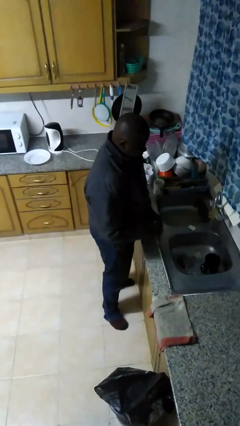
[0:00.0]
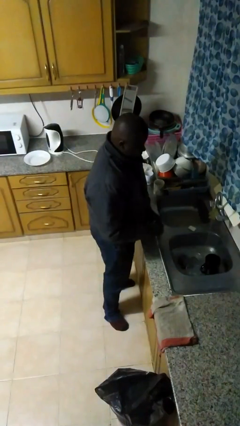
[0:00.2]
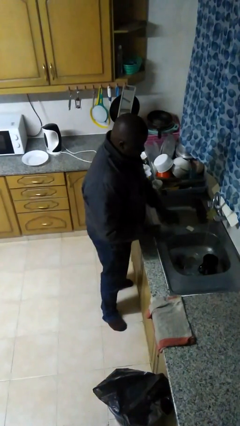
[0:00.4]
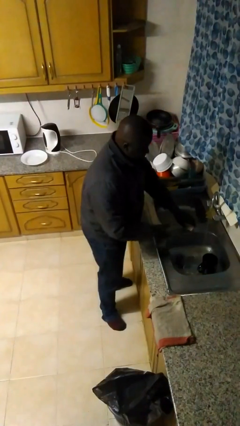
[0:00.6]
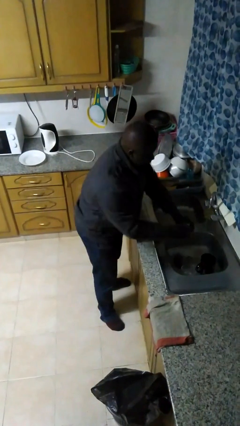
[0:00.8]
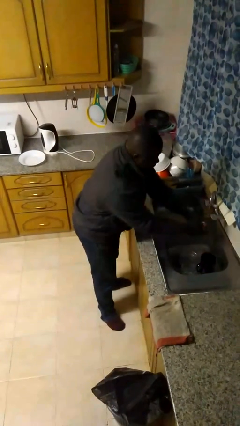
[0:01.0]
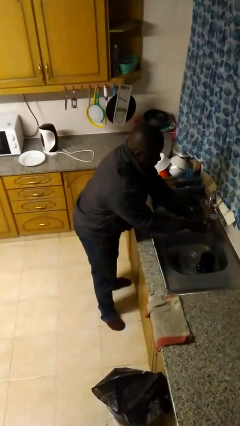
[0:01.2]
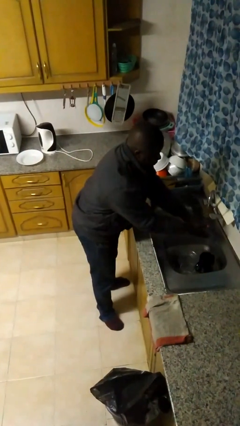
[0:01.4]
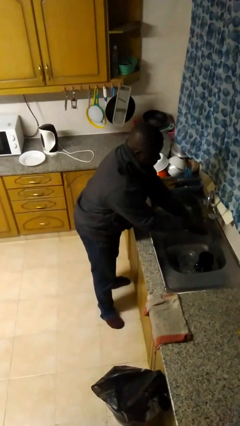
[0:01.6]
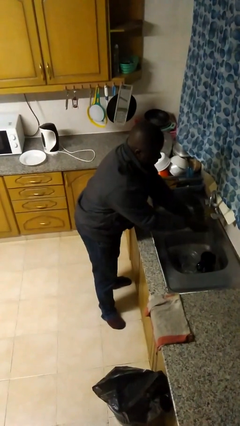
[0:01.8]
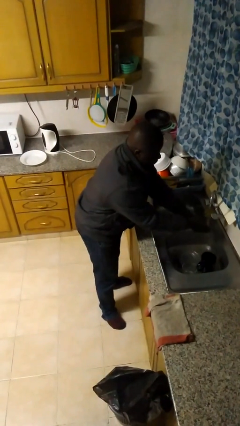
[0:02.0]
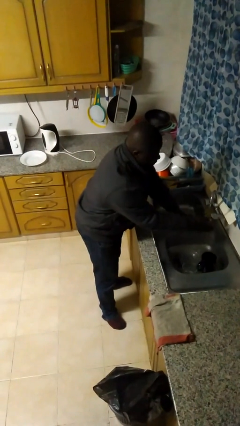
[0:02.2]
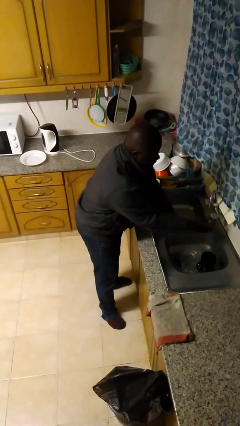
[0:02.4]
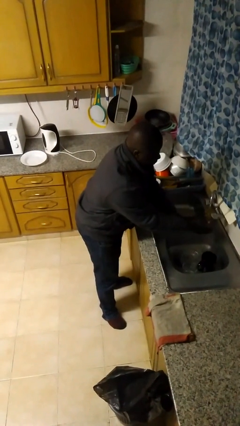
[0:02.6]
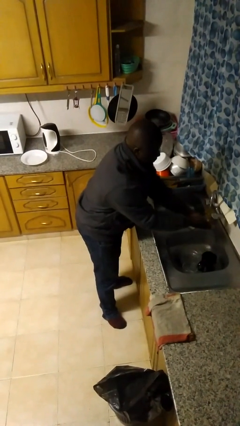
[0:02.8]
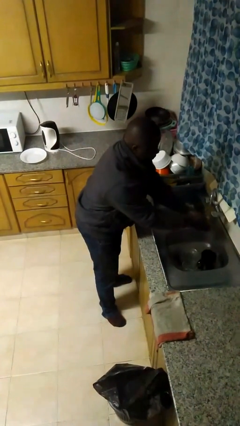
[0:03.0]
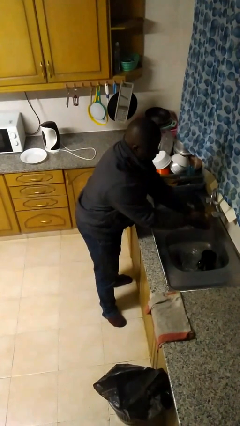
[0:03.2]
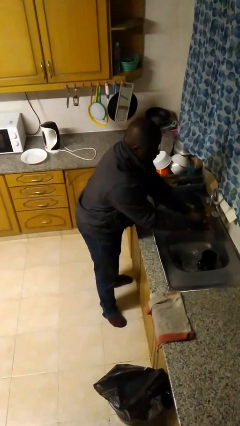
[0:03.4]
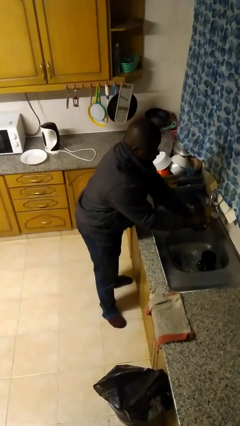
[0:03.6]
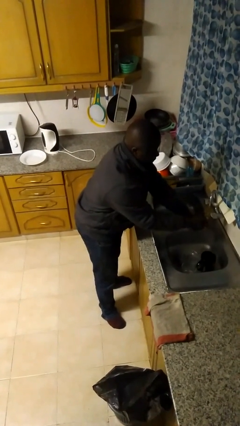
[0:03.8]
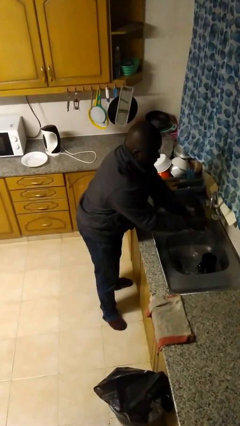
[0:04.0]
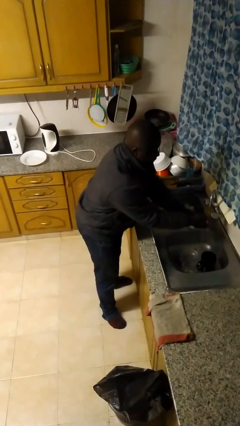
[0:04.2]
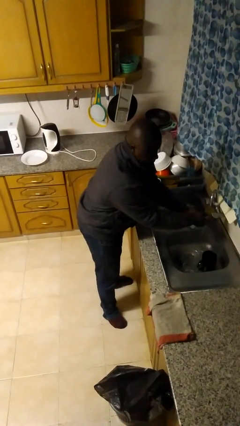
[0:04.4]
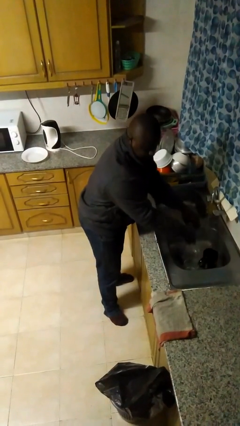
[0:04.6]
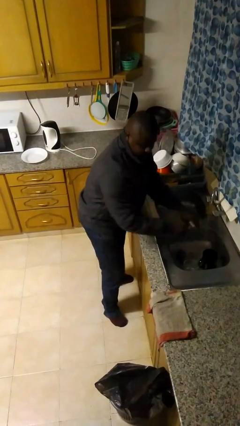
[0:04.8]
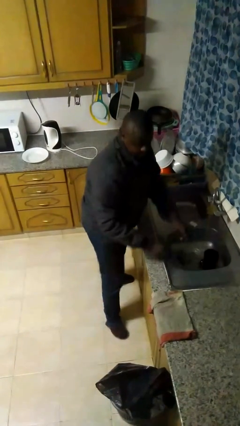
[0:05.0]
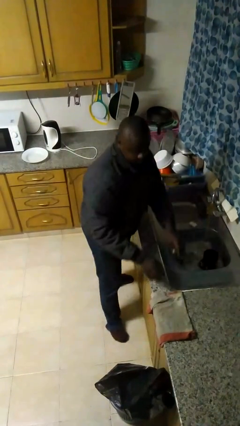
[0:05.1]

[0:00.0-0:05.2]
person washes hands

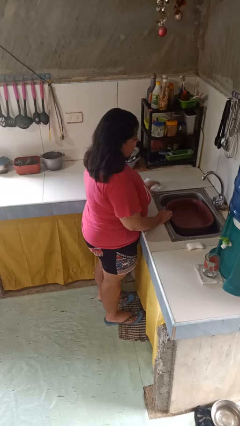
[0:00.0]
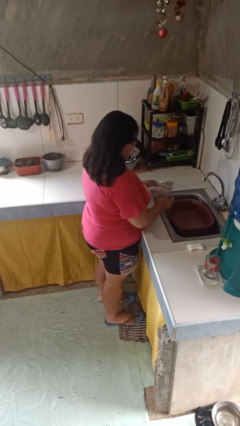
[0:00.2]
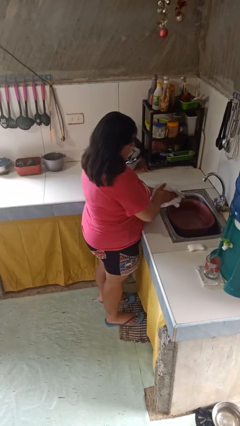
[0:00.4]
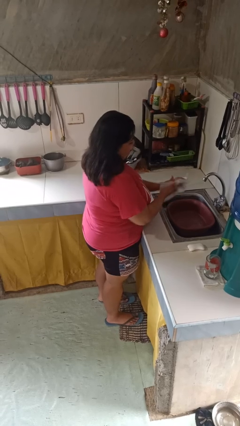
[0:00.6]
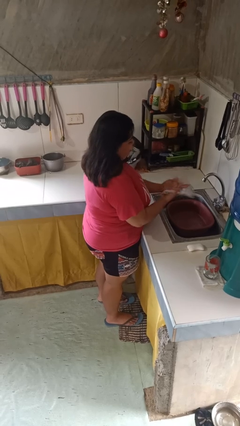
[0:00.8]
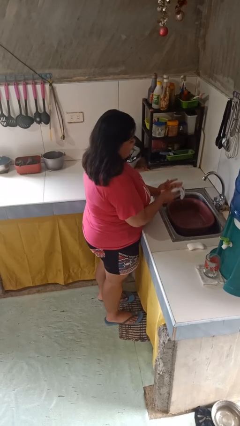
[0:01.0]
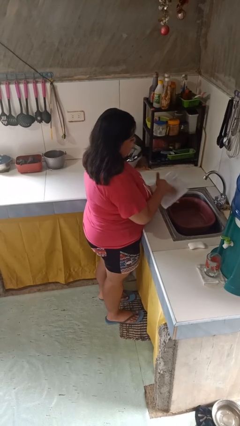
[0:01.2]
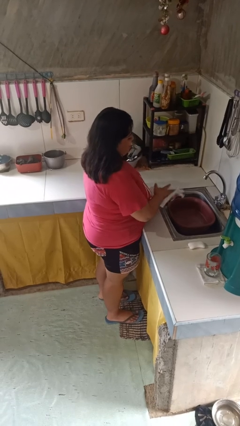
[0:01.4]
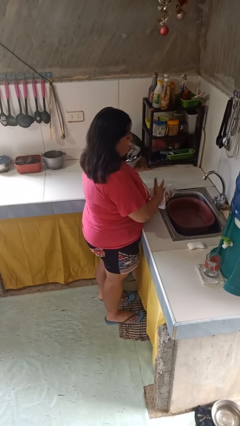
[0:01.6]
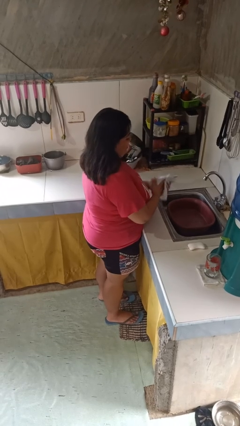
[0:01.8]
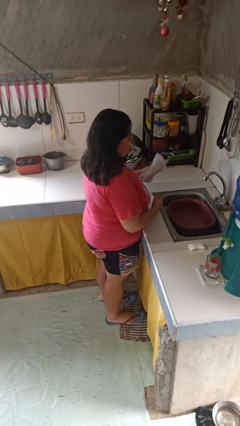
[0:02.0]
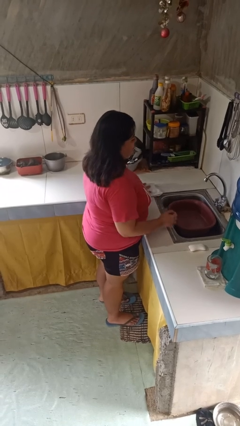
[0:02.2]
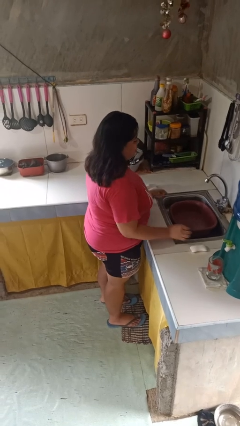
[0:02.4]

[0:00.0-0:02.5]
person dries hands with towel

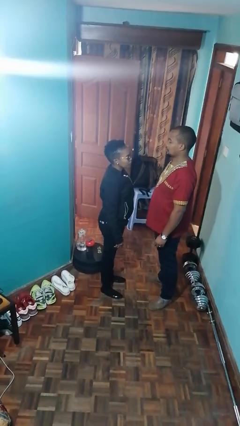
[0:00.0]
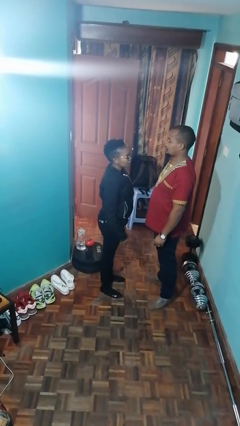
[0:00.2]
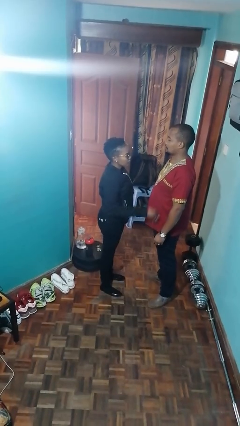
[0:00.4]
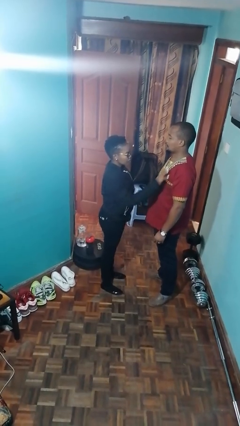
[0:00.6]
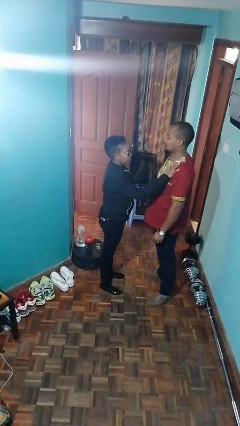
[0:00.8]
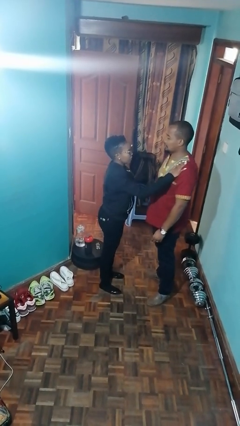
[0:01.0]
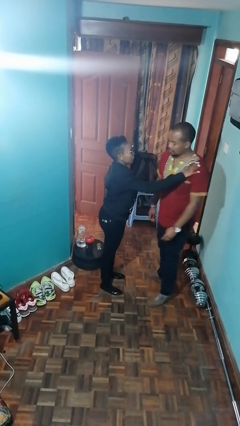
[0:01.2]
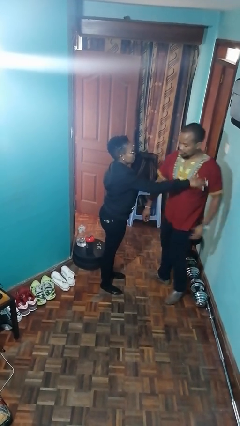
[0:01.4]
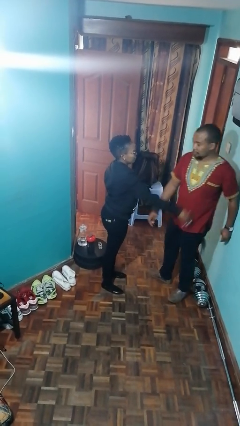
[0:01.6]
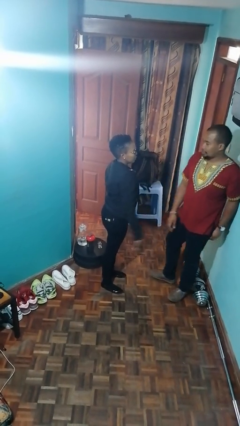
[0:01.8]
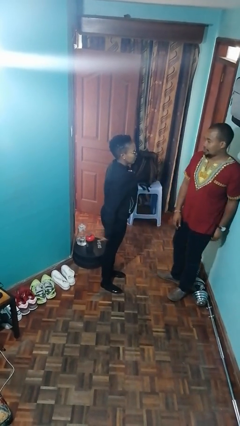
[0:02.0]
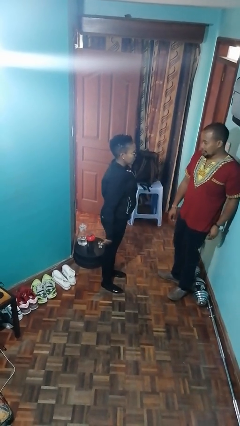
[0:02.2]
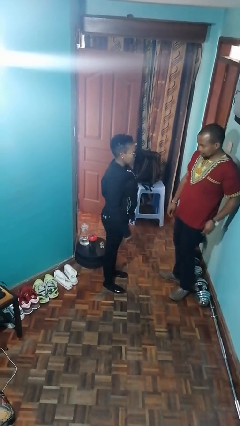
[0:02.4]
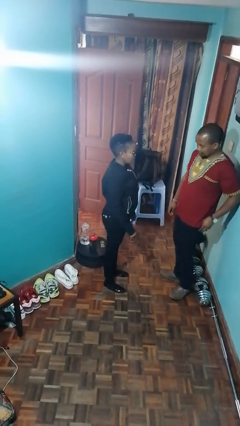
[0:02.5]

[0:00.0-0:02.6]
person shoves person

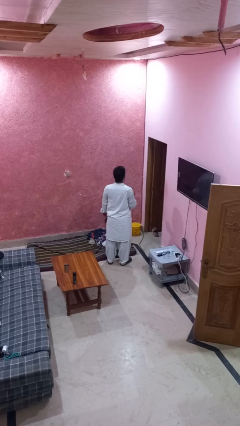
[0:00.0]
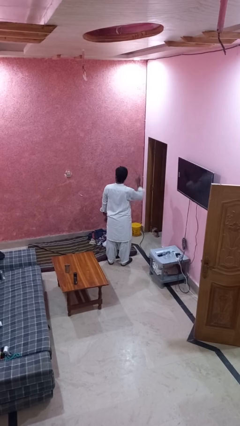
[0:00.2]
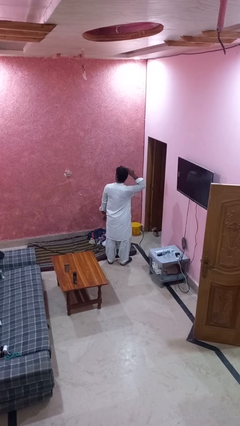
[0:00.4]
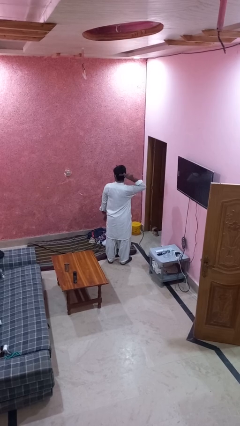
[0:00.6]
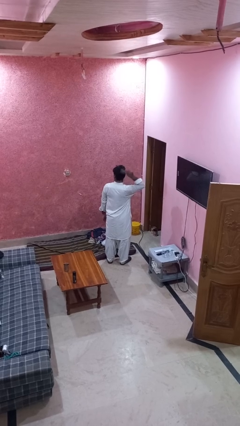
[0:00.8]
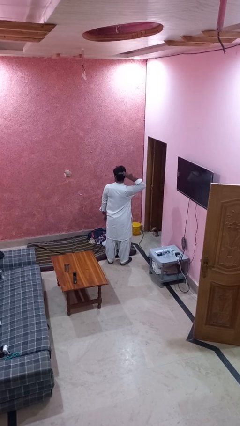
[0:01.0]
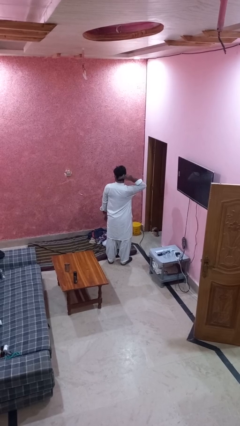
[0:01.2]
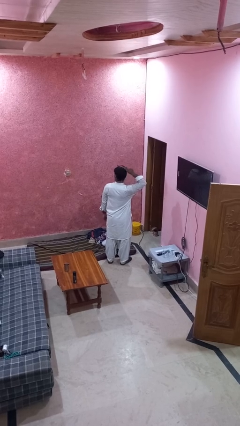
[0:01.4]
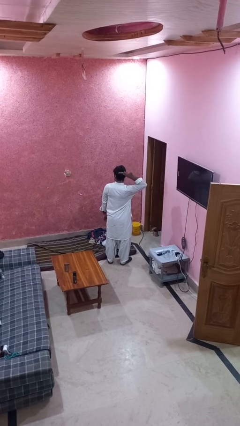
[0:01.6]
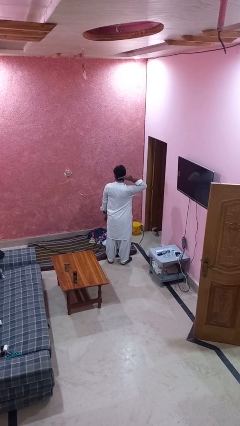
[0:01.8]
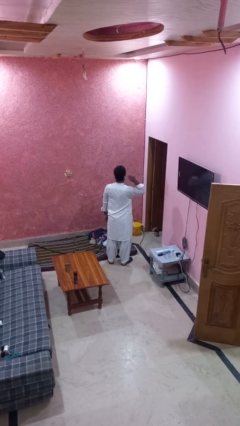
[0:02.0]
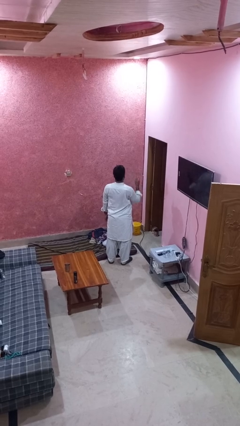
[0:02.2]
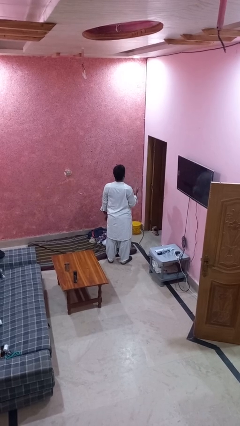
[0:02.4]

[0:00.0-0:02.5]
person brushes hair

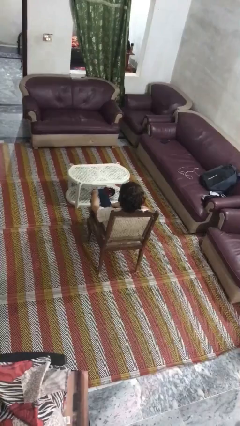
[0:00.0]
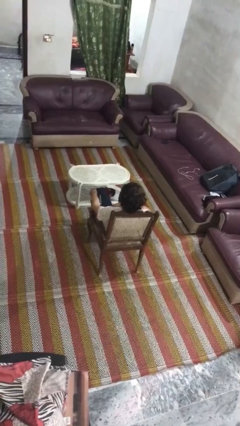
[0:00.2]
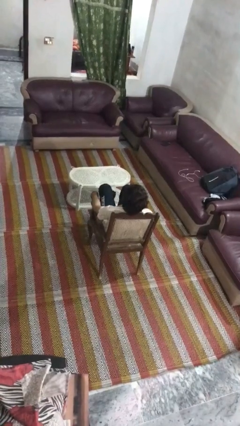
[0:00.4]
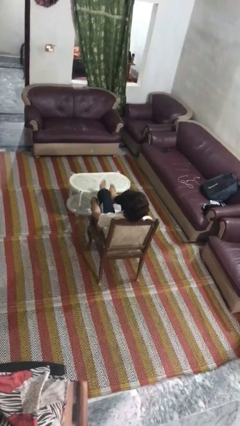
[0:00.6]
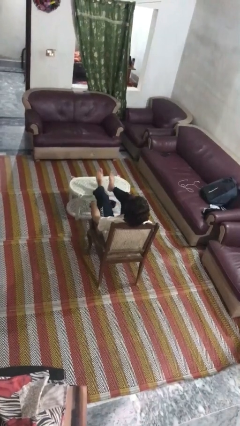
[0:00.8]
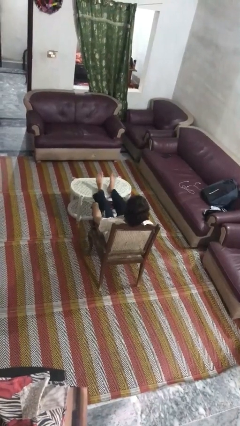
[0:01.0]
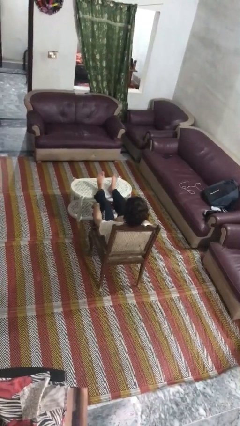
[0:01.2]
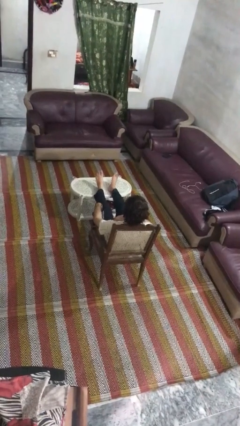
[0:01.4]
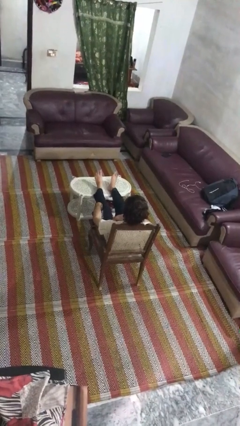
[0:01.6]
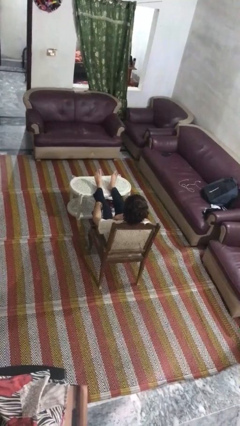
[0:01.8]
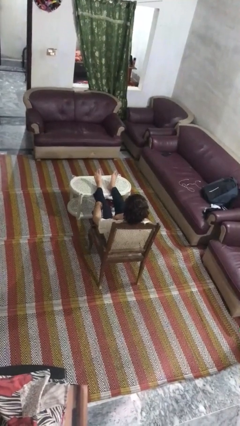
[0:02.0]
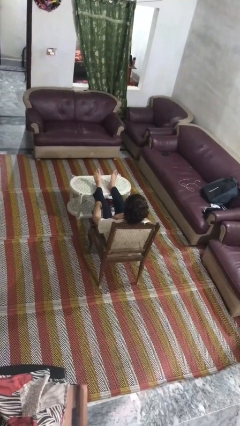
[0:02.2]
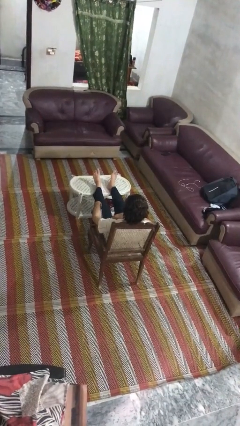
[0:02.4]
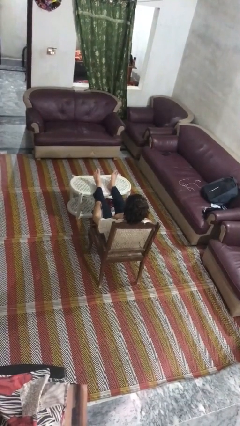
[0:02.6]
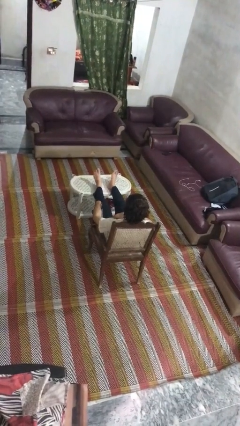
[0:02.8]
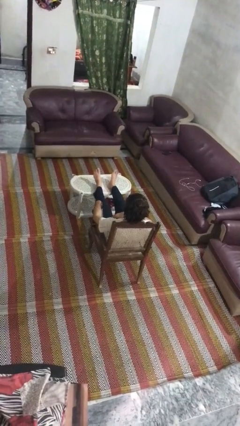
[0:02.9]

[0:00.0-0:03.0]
person puts feet up

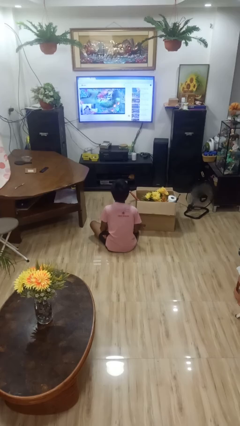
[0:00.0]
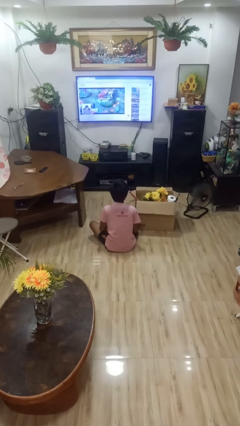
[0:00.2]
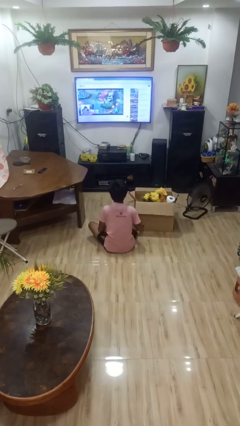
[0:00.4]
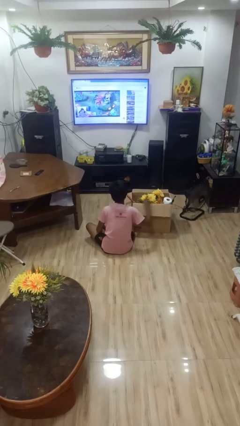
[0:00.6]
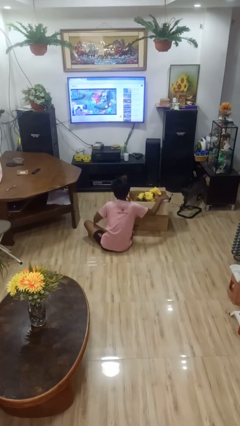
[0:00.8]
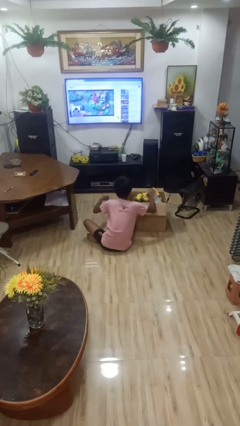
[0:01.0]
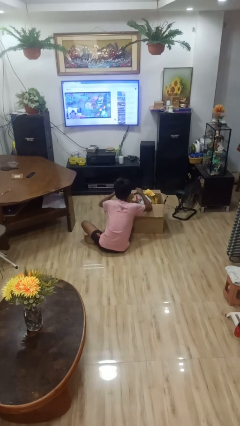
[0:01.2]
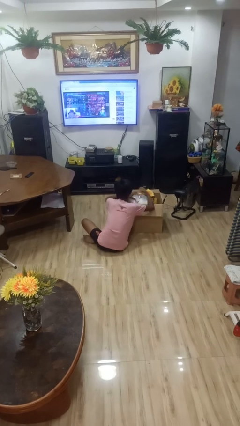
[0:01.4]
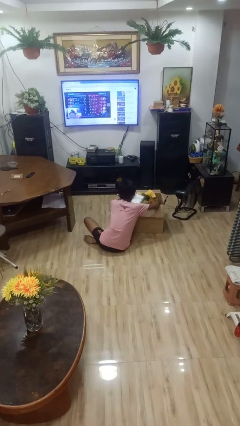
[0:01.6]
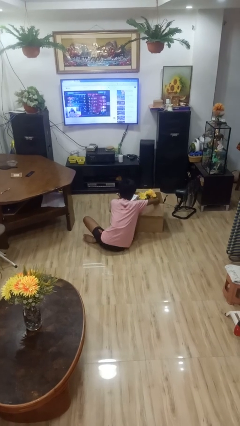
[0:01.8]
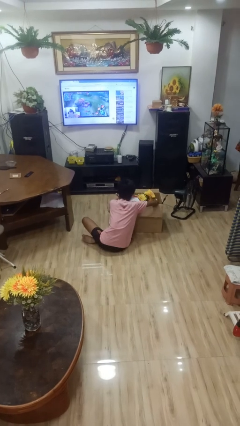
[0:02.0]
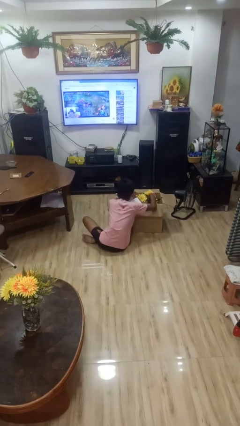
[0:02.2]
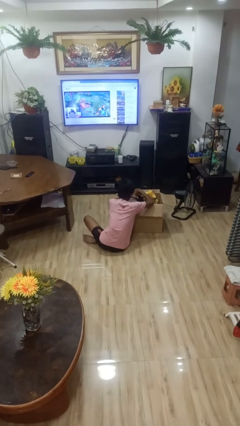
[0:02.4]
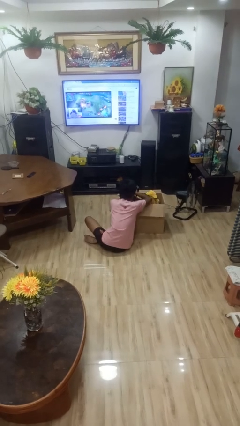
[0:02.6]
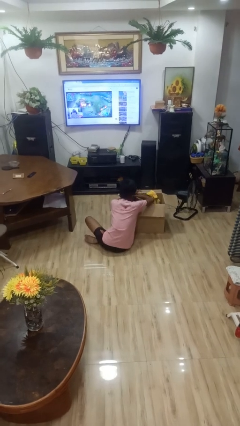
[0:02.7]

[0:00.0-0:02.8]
person searches in box
